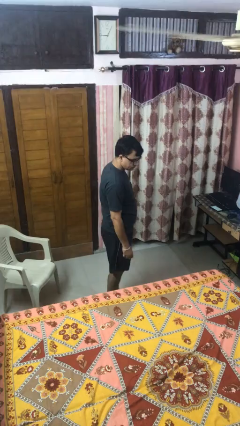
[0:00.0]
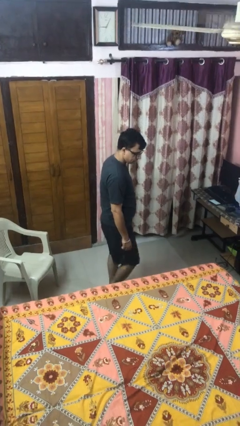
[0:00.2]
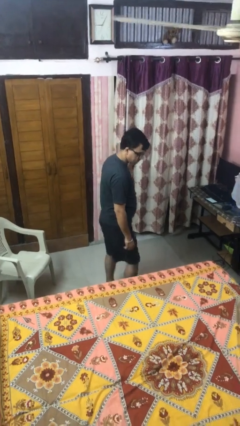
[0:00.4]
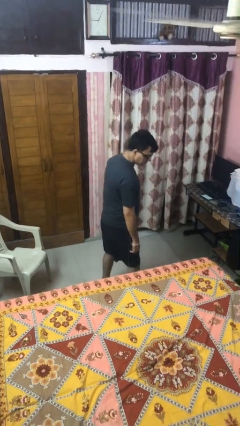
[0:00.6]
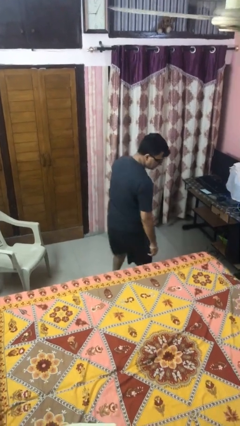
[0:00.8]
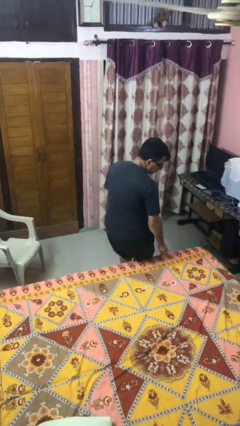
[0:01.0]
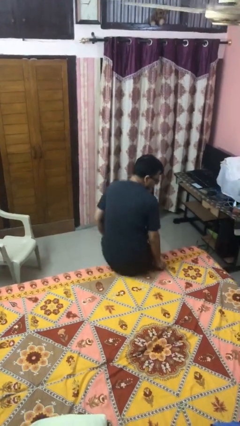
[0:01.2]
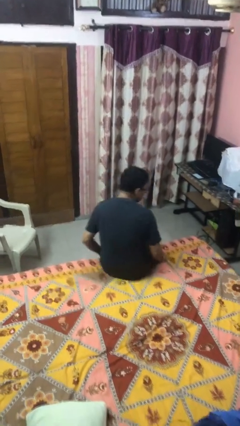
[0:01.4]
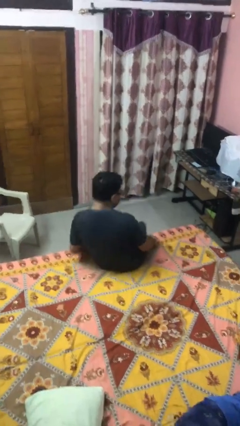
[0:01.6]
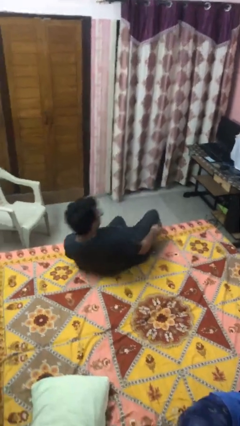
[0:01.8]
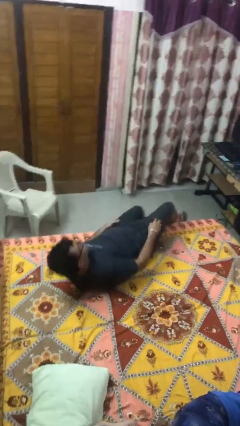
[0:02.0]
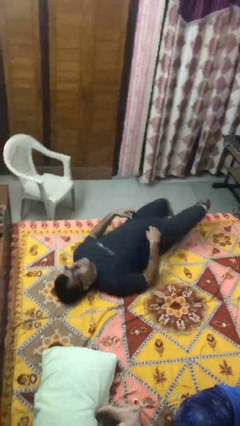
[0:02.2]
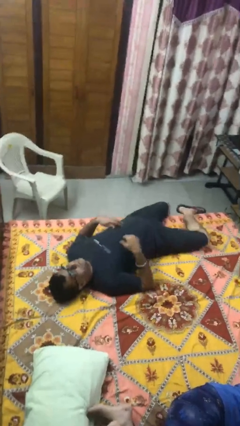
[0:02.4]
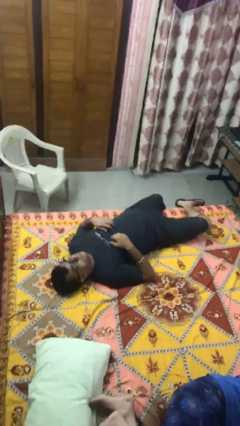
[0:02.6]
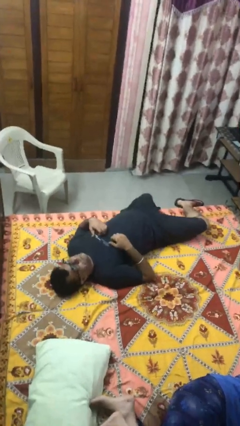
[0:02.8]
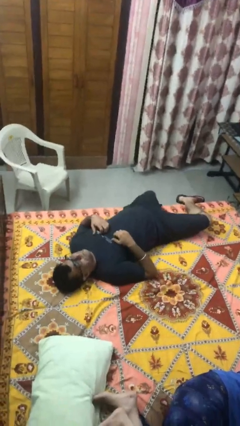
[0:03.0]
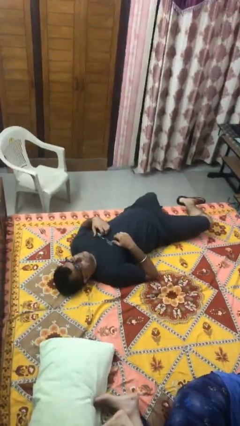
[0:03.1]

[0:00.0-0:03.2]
person lies down on bed

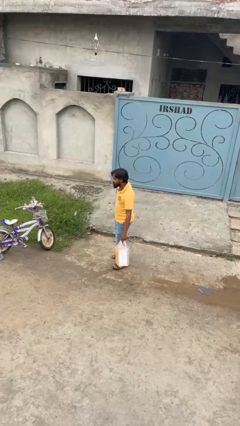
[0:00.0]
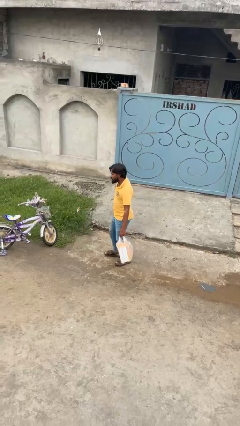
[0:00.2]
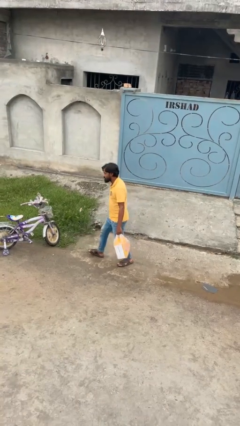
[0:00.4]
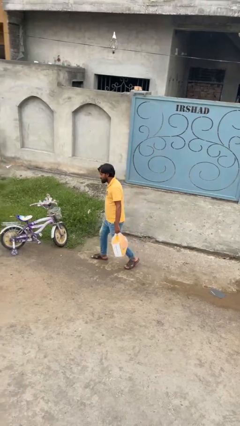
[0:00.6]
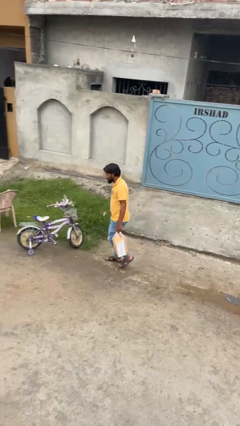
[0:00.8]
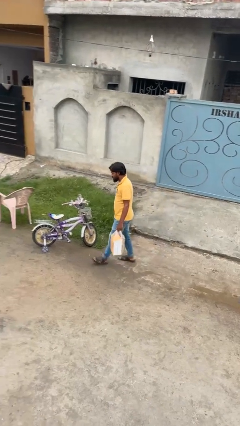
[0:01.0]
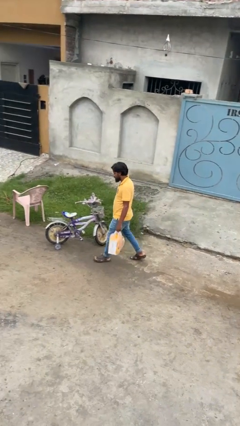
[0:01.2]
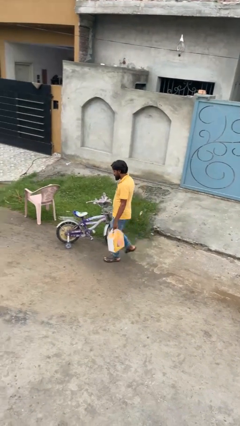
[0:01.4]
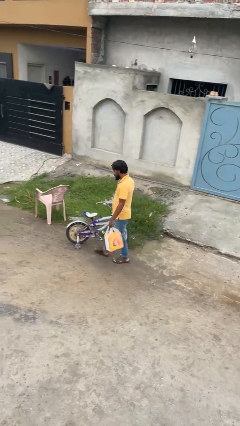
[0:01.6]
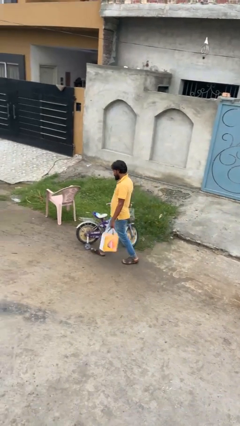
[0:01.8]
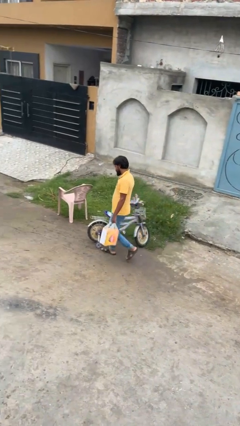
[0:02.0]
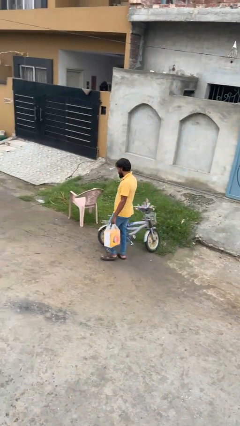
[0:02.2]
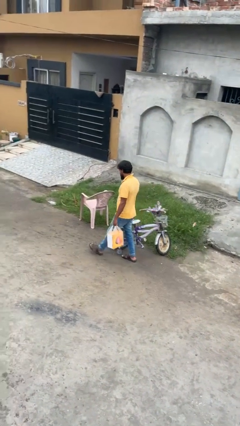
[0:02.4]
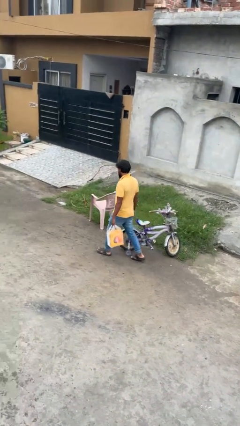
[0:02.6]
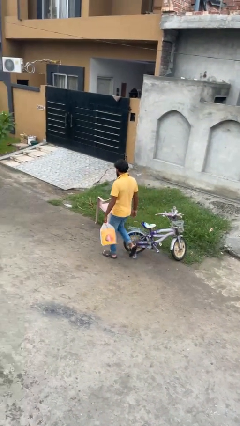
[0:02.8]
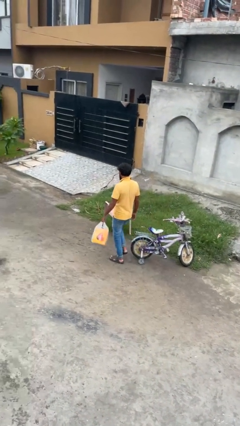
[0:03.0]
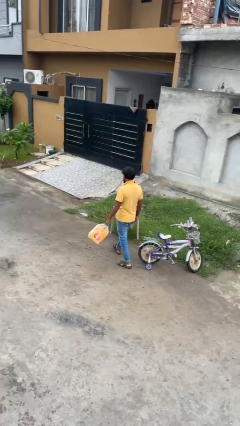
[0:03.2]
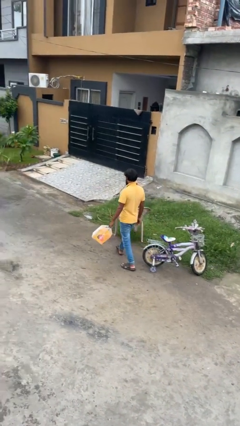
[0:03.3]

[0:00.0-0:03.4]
person carries groceries

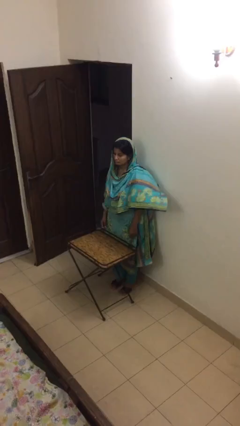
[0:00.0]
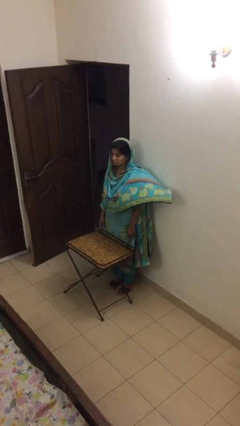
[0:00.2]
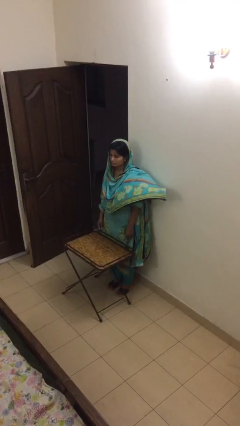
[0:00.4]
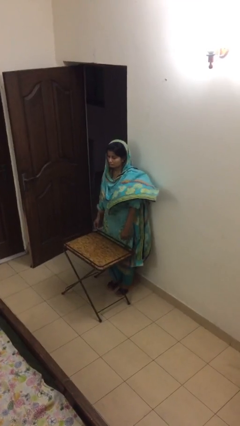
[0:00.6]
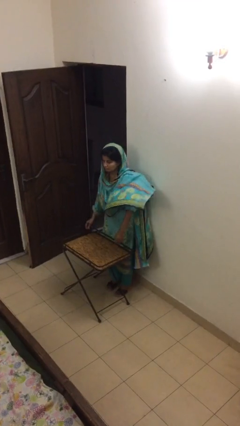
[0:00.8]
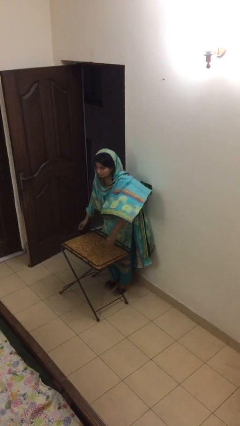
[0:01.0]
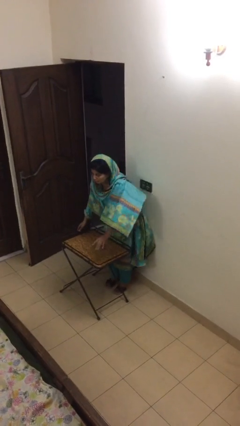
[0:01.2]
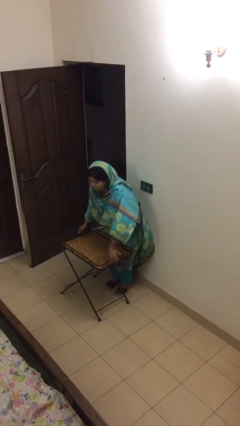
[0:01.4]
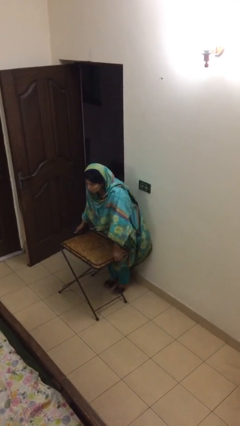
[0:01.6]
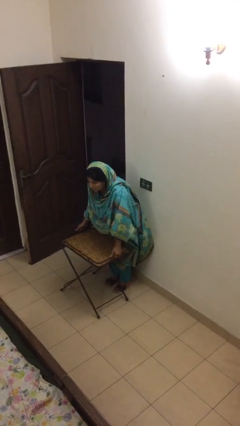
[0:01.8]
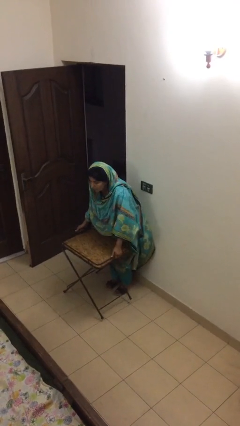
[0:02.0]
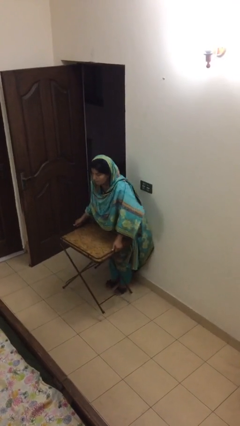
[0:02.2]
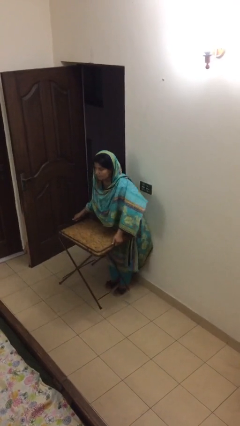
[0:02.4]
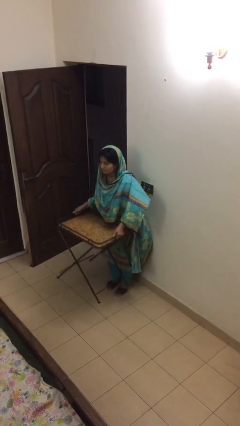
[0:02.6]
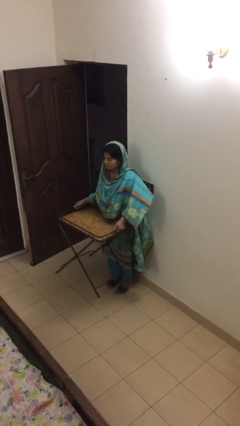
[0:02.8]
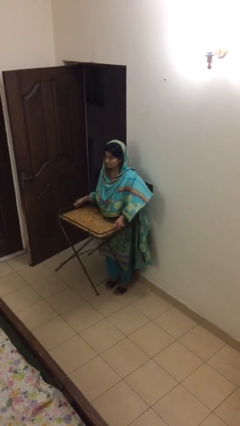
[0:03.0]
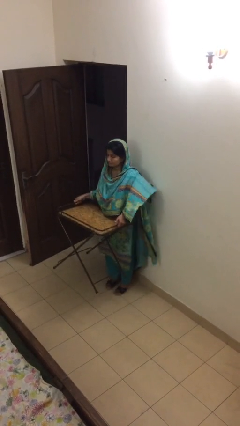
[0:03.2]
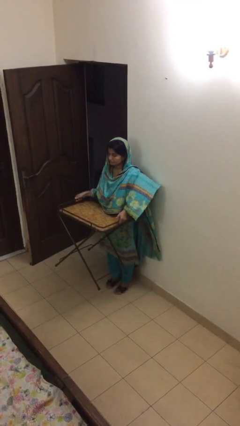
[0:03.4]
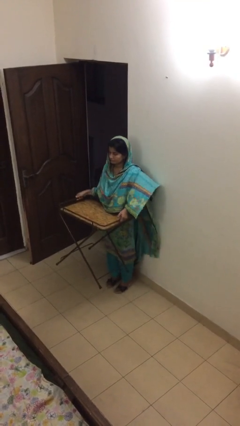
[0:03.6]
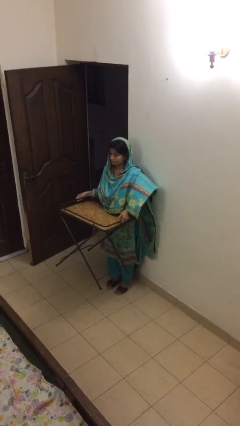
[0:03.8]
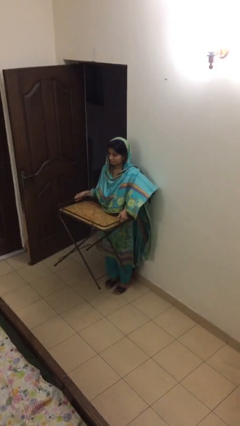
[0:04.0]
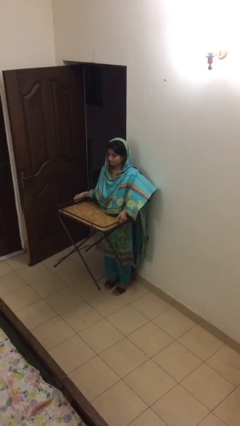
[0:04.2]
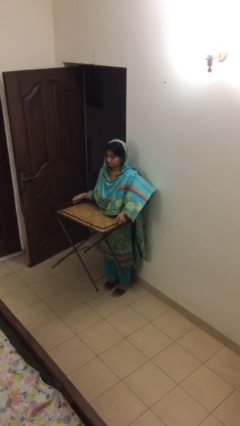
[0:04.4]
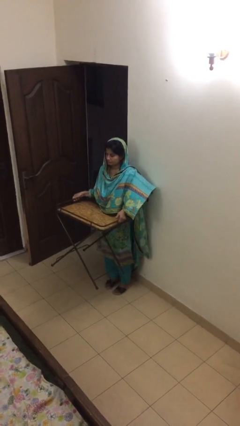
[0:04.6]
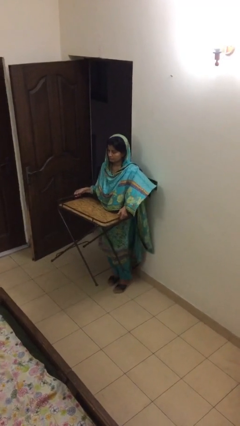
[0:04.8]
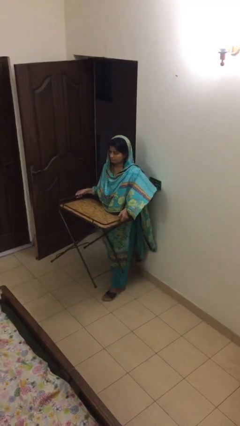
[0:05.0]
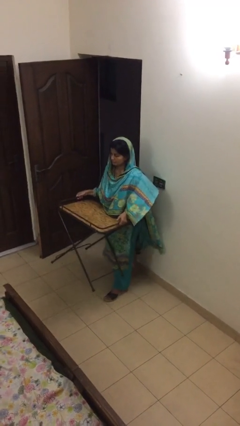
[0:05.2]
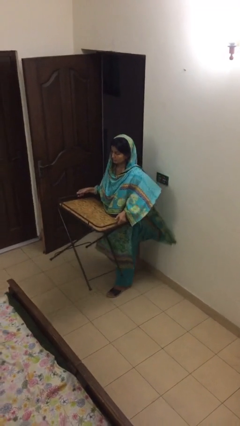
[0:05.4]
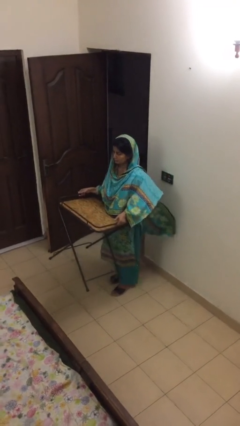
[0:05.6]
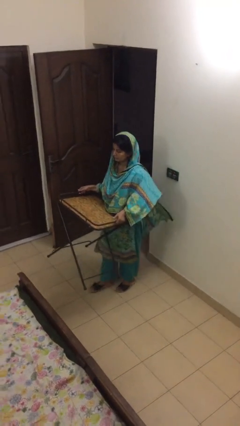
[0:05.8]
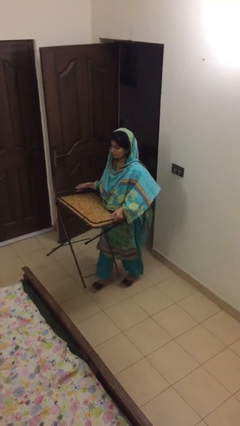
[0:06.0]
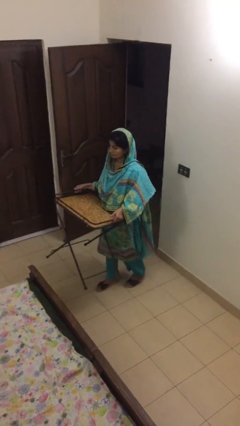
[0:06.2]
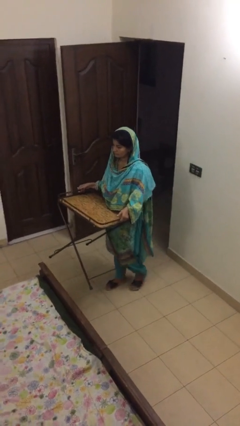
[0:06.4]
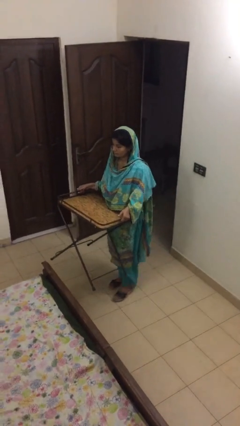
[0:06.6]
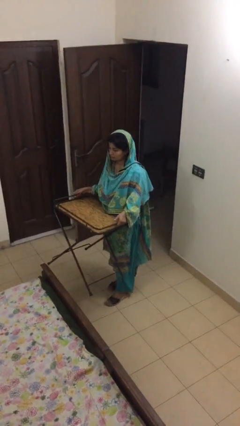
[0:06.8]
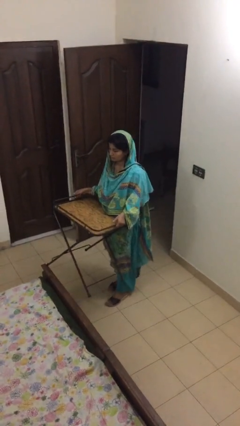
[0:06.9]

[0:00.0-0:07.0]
person carries heavy object

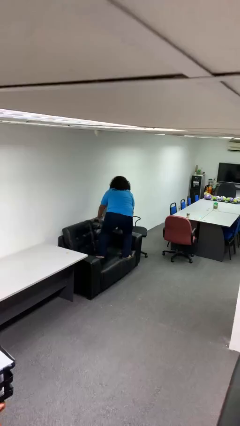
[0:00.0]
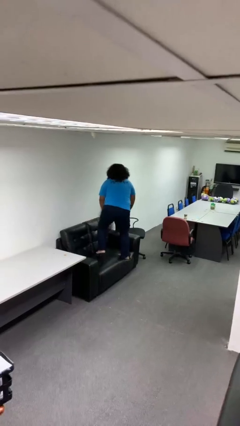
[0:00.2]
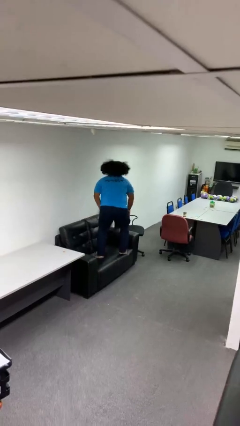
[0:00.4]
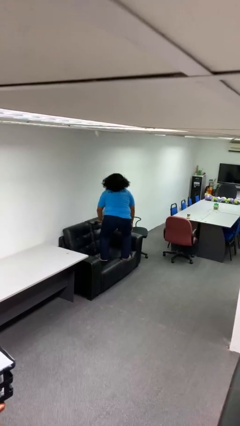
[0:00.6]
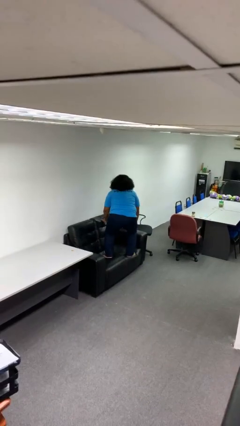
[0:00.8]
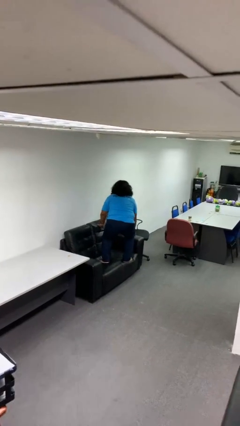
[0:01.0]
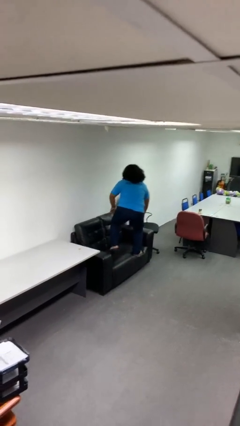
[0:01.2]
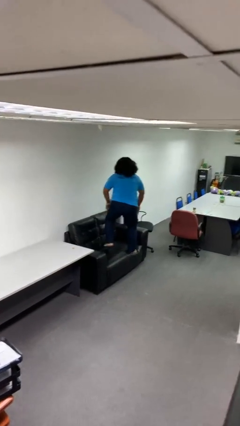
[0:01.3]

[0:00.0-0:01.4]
person jumps on couch

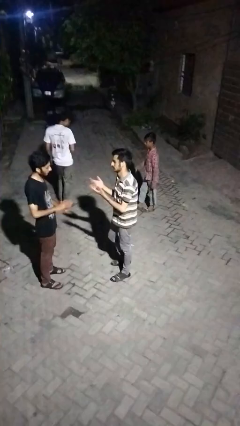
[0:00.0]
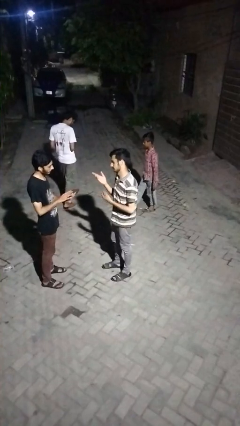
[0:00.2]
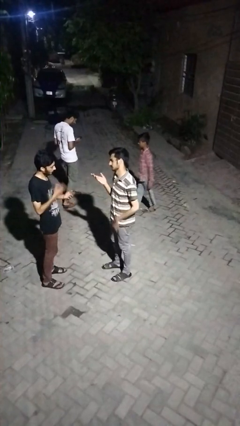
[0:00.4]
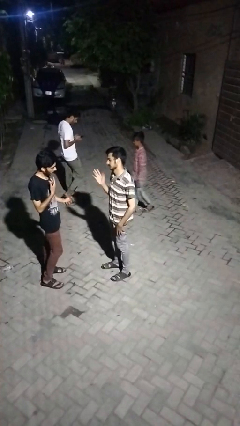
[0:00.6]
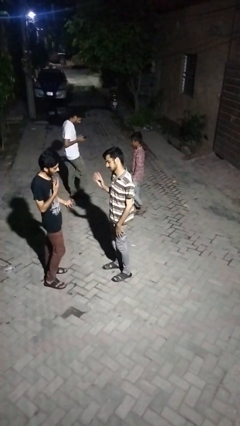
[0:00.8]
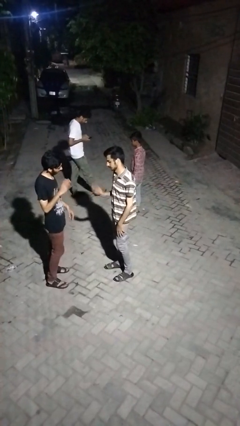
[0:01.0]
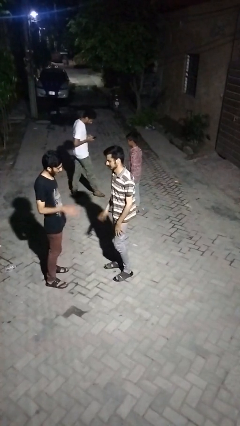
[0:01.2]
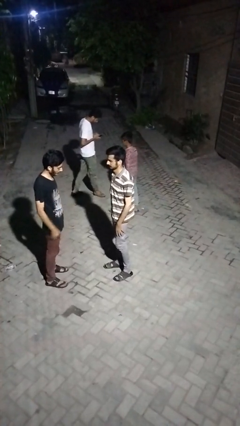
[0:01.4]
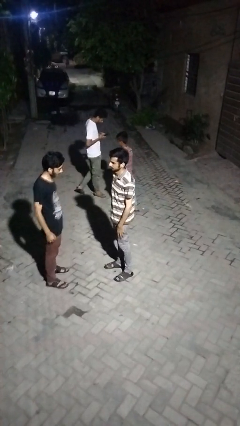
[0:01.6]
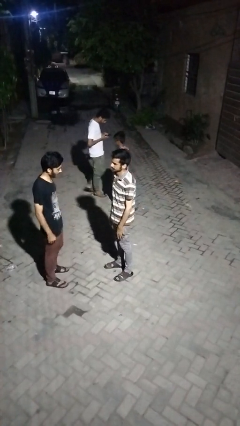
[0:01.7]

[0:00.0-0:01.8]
person talks to person

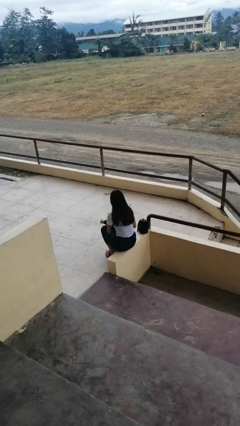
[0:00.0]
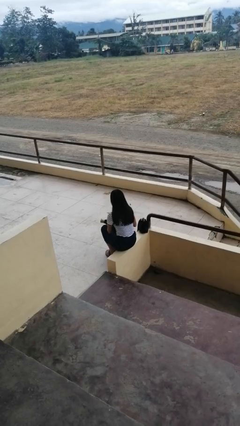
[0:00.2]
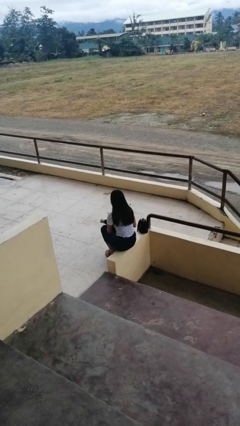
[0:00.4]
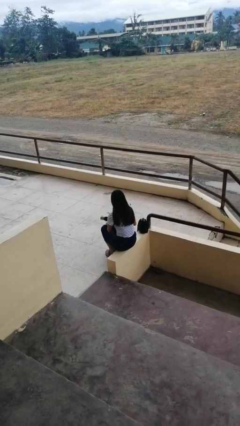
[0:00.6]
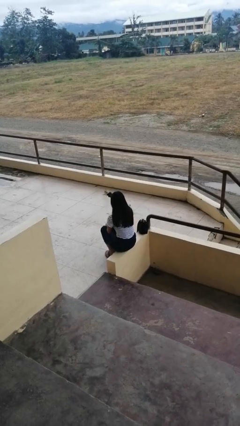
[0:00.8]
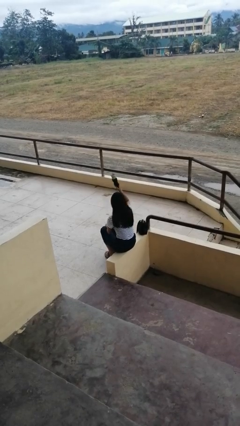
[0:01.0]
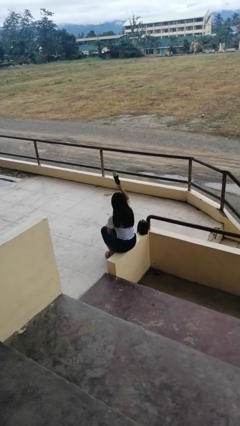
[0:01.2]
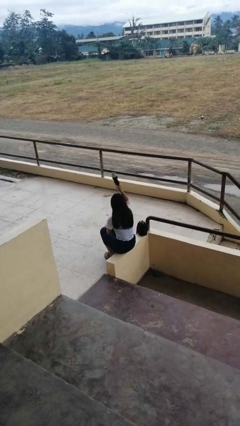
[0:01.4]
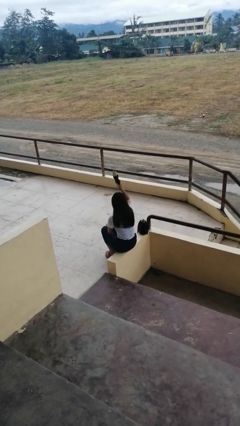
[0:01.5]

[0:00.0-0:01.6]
person holds object above head
